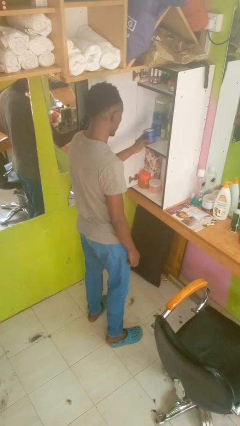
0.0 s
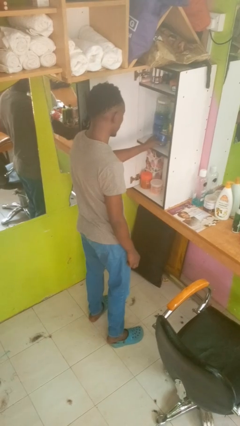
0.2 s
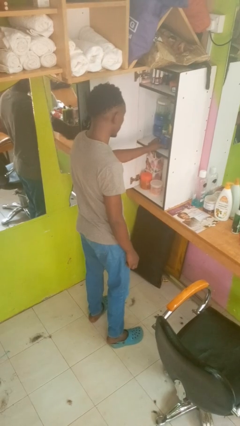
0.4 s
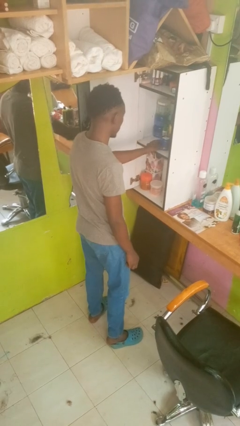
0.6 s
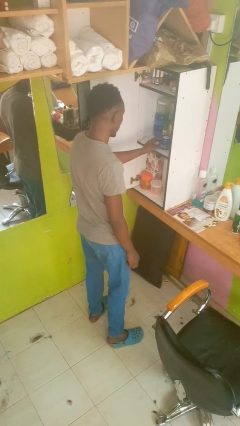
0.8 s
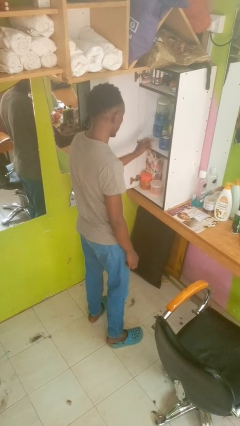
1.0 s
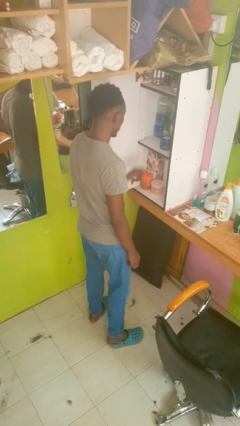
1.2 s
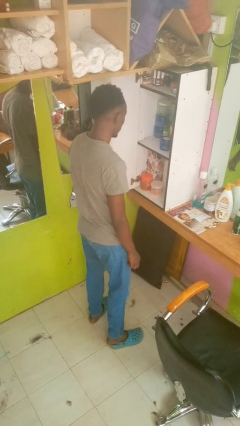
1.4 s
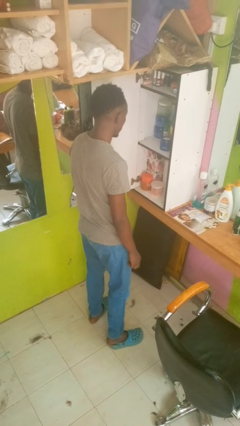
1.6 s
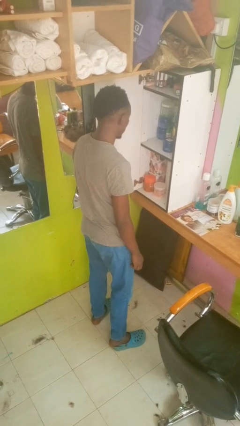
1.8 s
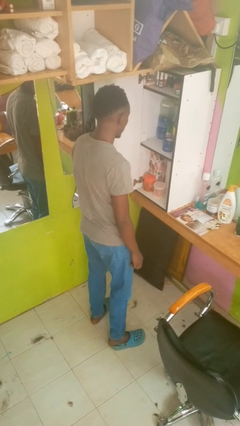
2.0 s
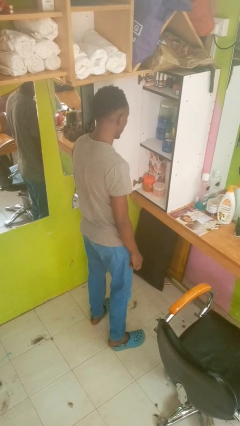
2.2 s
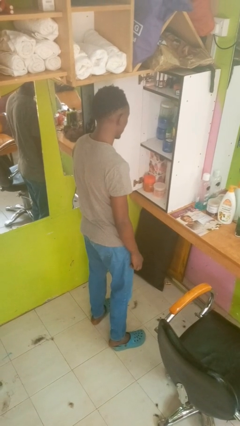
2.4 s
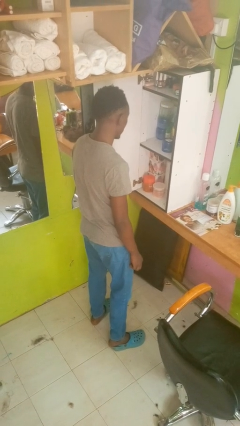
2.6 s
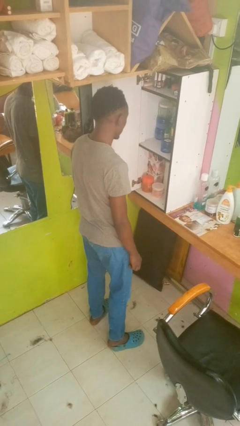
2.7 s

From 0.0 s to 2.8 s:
person puts down object into cabinet

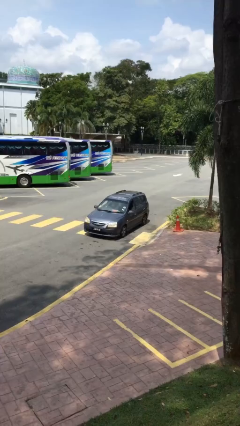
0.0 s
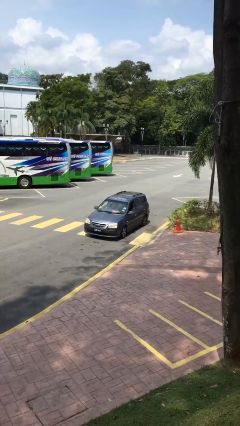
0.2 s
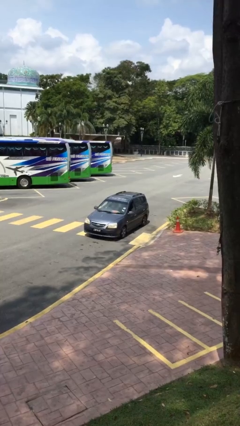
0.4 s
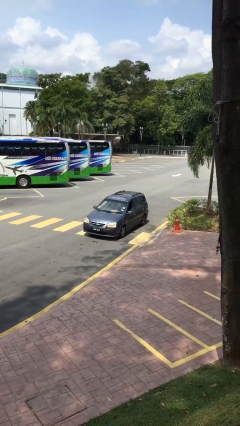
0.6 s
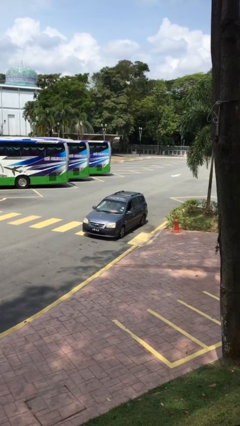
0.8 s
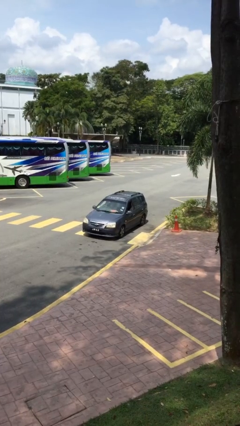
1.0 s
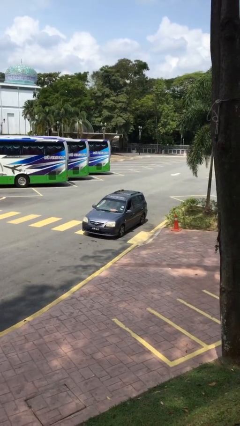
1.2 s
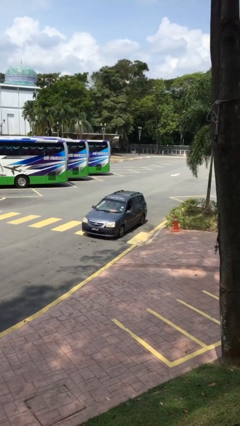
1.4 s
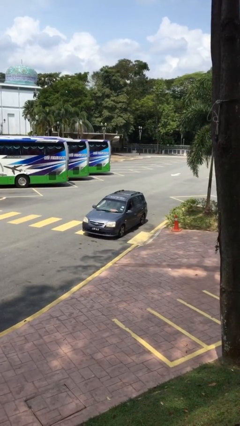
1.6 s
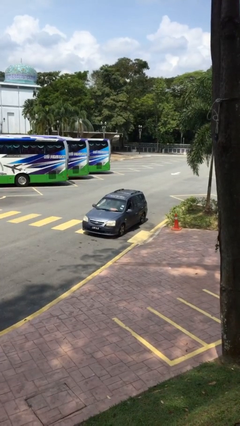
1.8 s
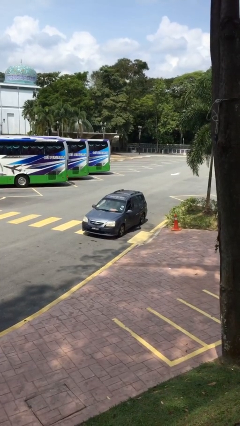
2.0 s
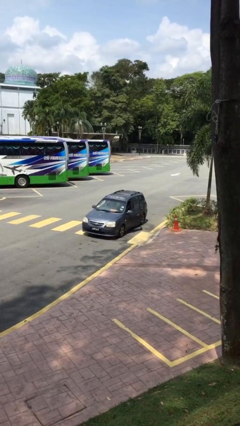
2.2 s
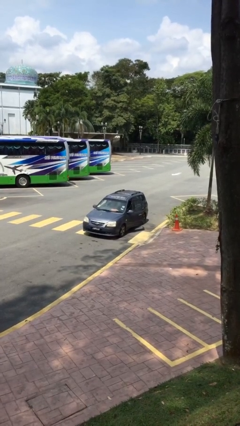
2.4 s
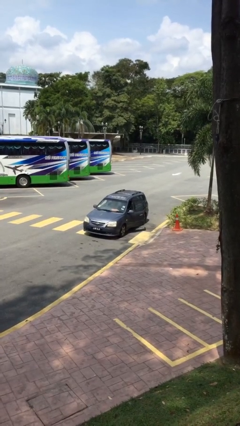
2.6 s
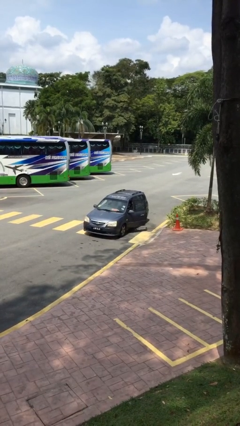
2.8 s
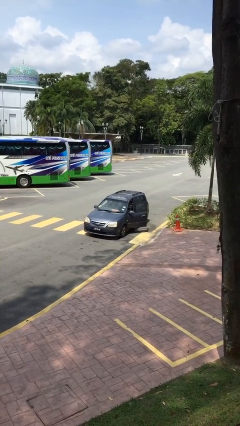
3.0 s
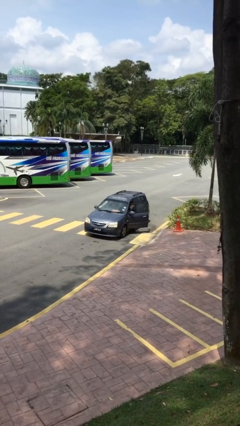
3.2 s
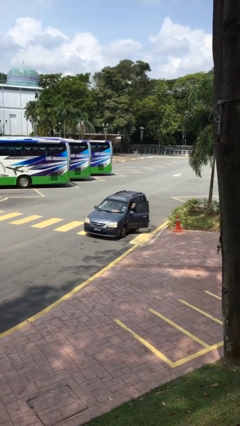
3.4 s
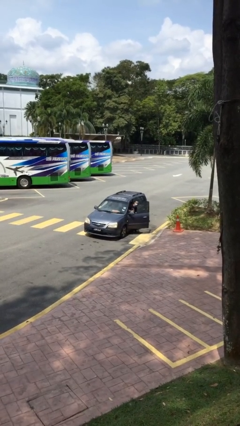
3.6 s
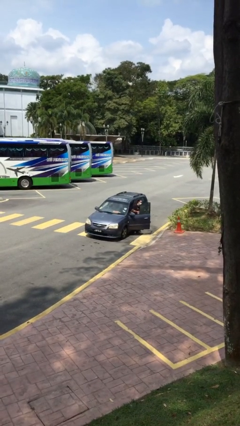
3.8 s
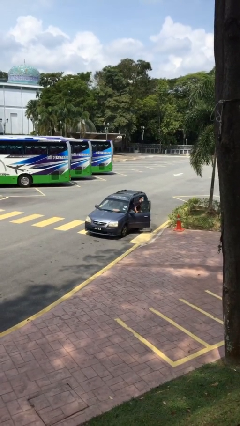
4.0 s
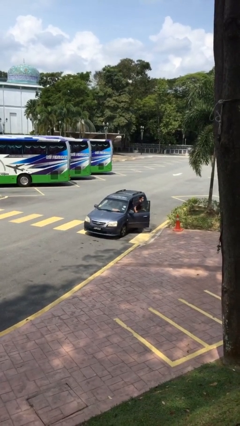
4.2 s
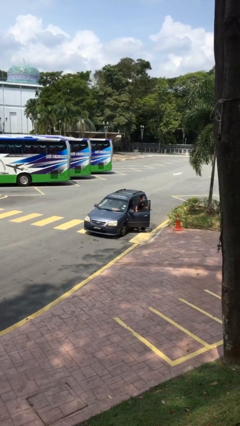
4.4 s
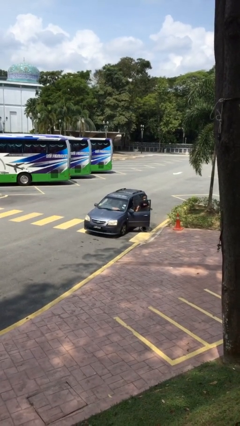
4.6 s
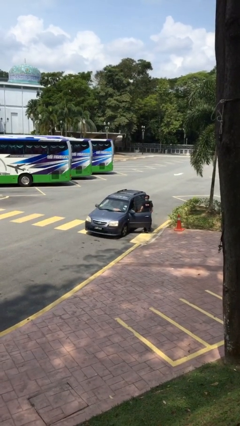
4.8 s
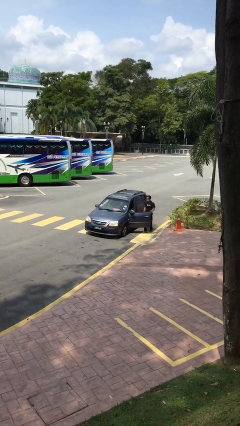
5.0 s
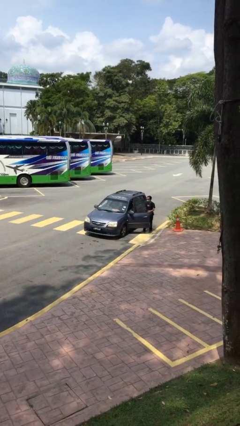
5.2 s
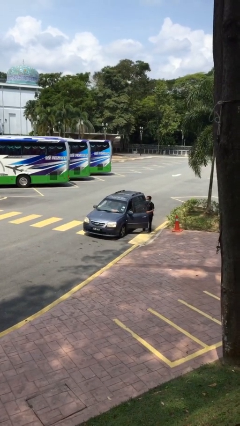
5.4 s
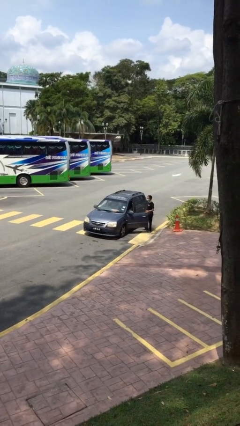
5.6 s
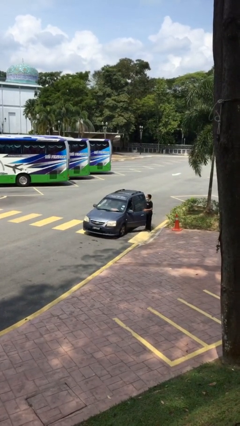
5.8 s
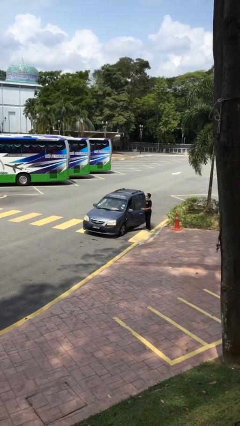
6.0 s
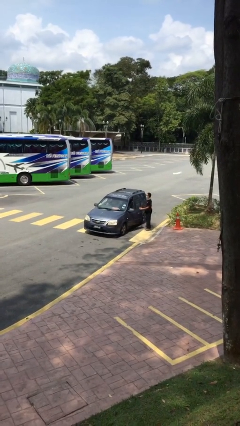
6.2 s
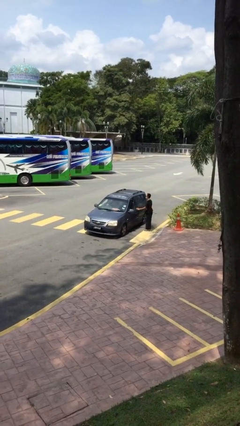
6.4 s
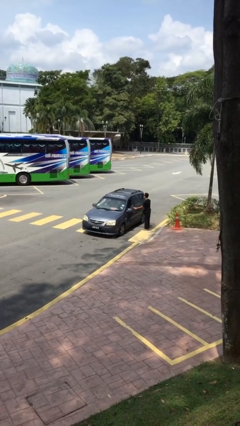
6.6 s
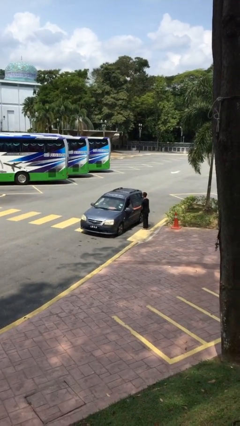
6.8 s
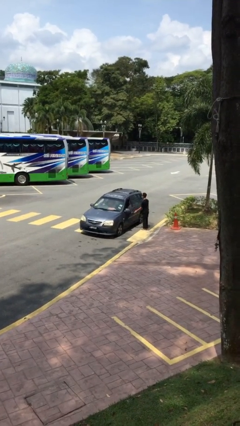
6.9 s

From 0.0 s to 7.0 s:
car drops off person

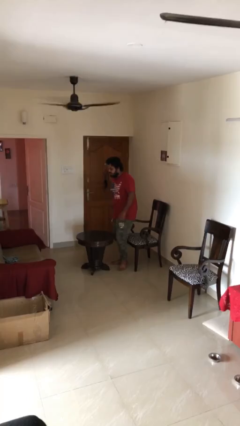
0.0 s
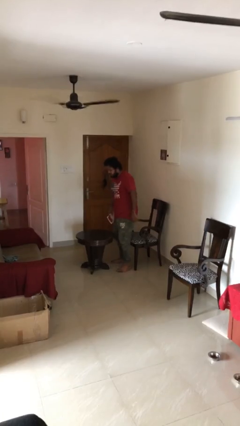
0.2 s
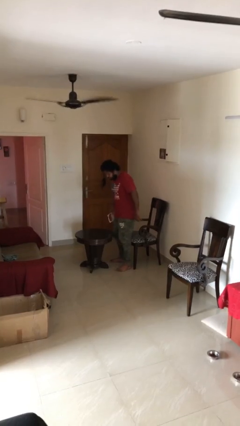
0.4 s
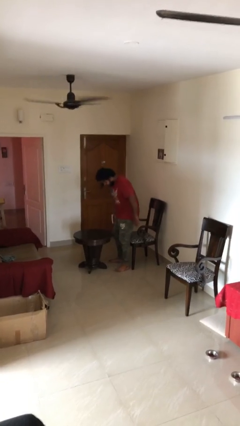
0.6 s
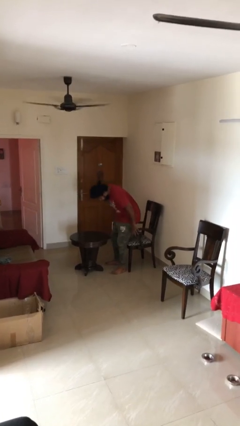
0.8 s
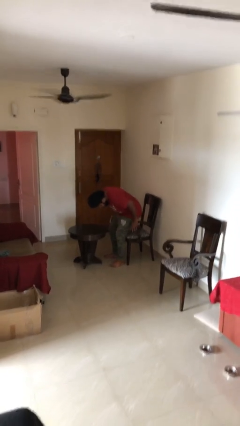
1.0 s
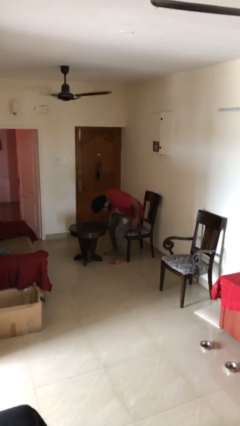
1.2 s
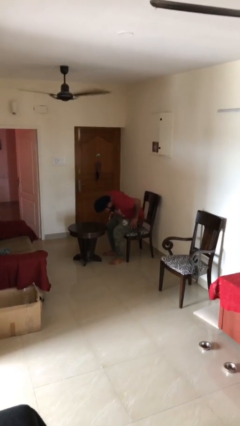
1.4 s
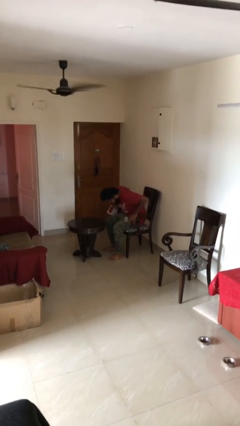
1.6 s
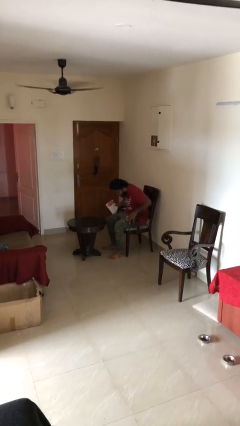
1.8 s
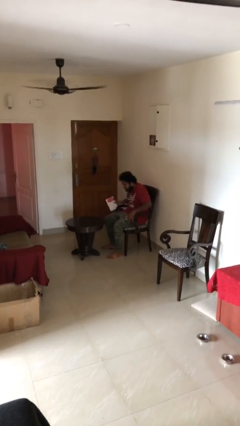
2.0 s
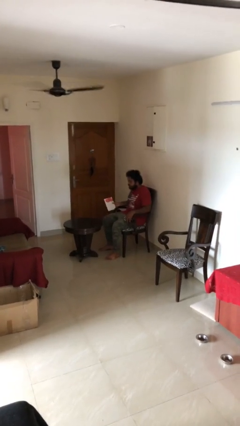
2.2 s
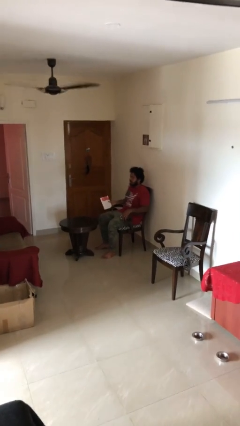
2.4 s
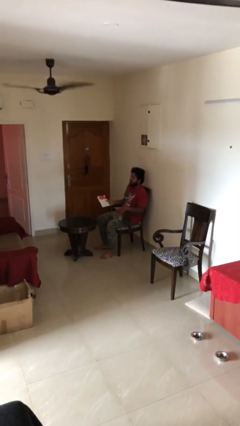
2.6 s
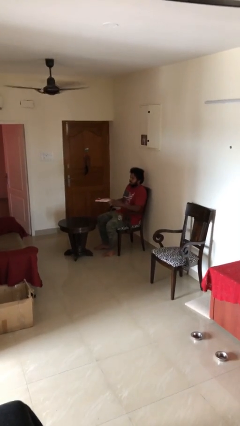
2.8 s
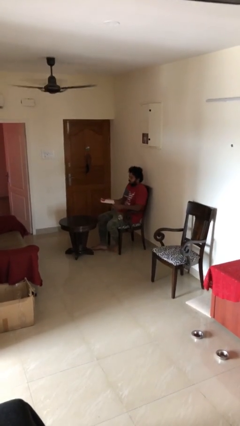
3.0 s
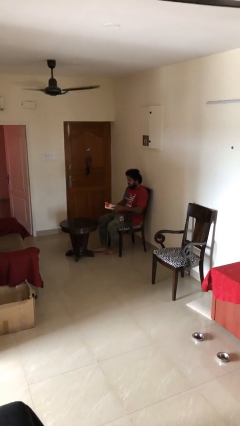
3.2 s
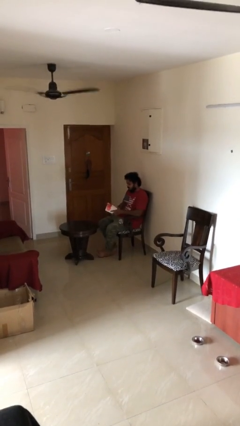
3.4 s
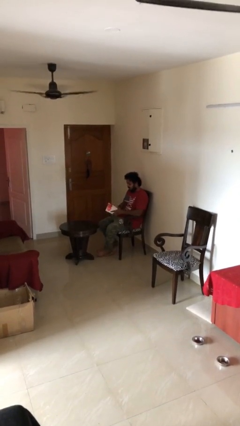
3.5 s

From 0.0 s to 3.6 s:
person sits down

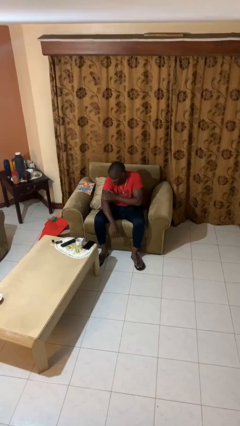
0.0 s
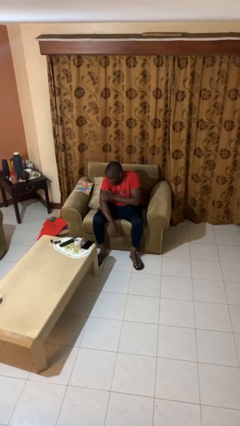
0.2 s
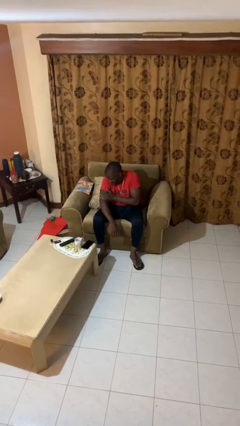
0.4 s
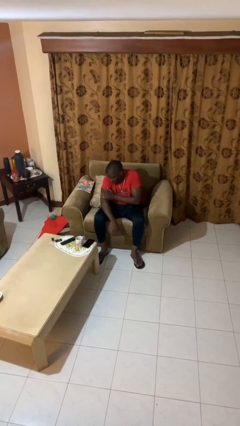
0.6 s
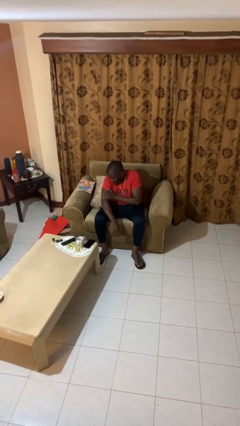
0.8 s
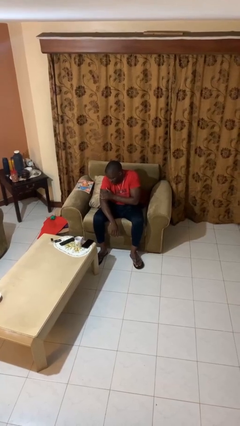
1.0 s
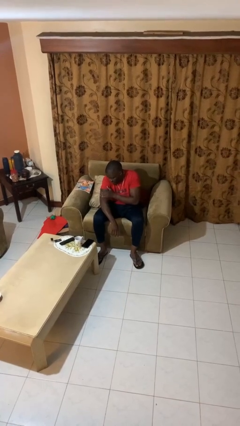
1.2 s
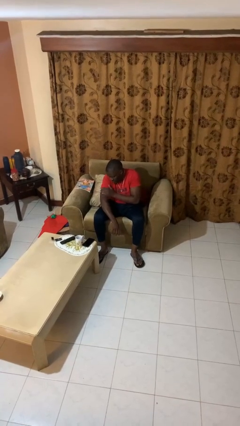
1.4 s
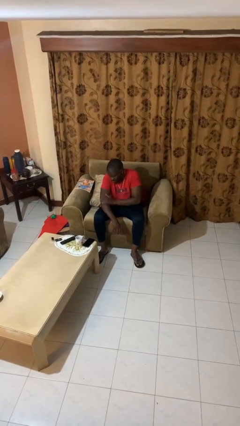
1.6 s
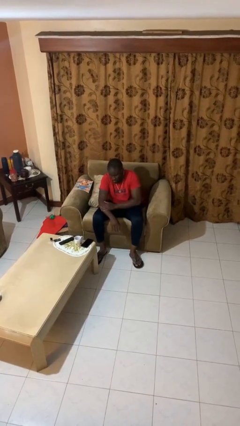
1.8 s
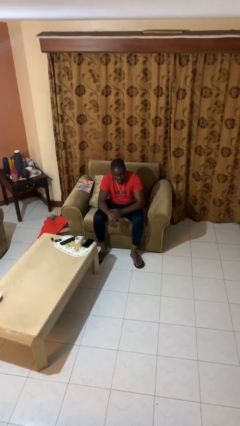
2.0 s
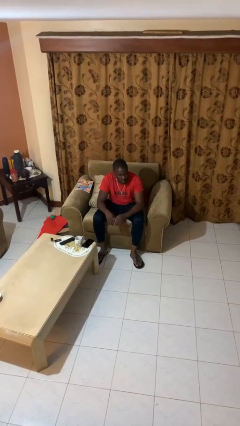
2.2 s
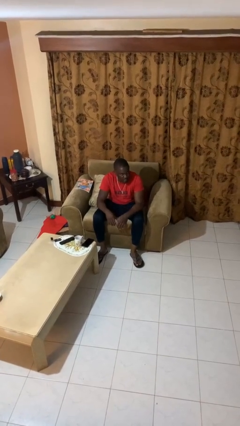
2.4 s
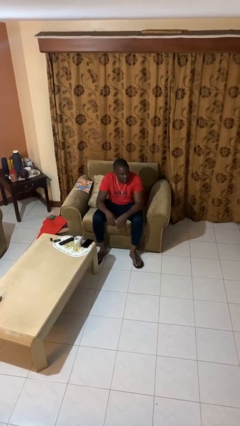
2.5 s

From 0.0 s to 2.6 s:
person swats bug

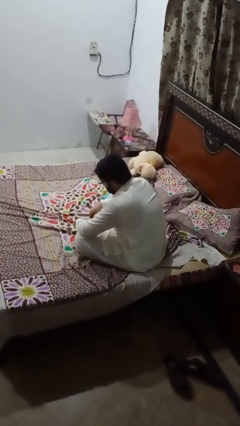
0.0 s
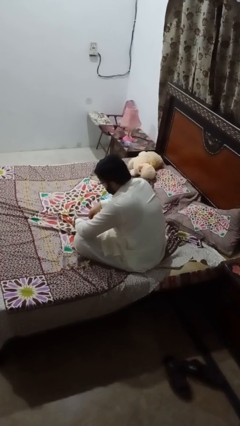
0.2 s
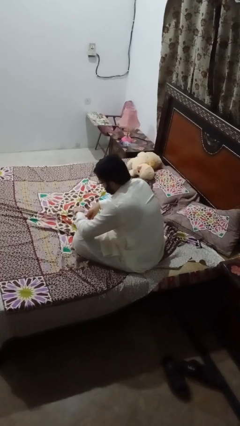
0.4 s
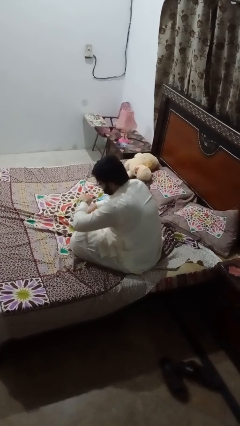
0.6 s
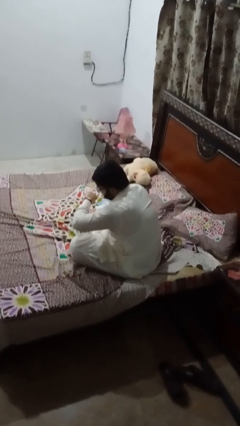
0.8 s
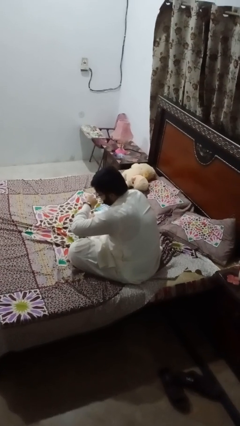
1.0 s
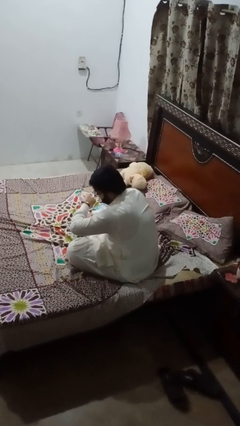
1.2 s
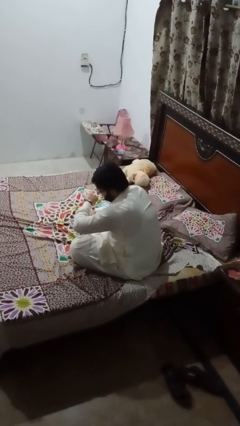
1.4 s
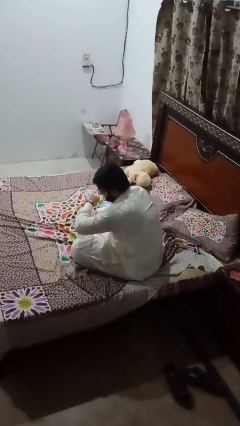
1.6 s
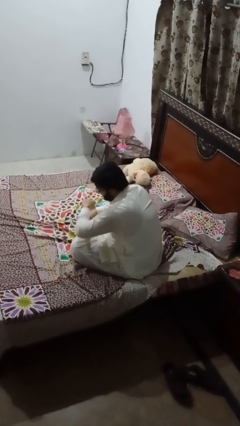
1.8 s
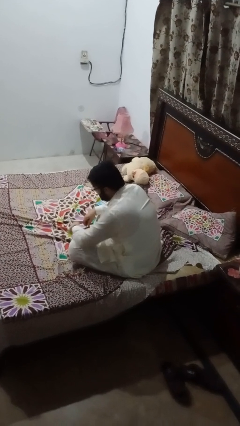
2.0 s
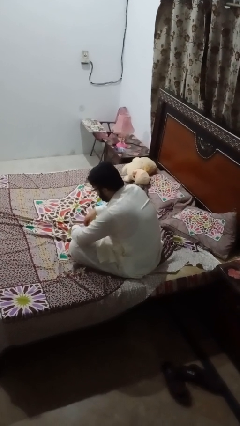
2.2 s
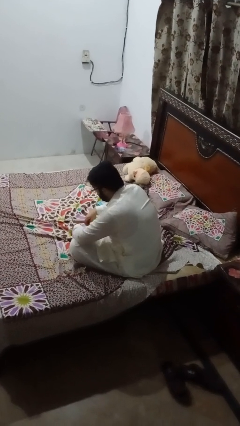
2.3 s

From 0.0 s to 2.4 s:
person looks at wristwatch
